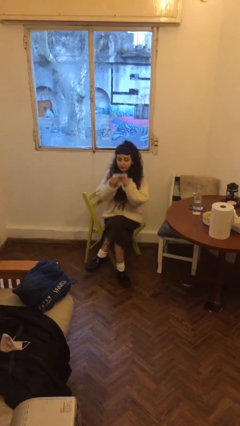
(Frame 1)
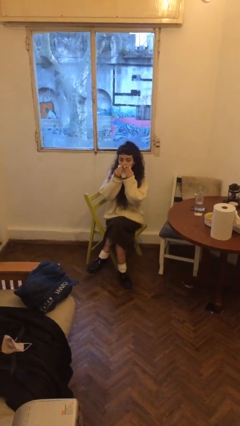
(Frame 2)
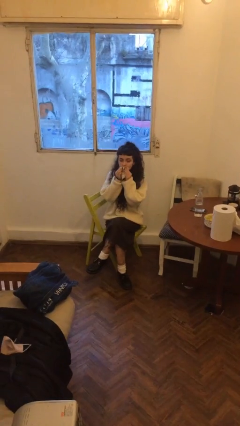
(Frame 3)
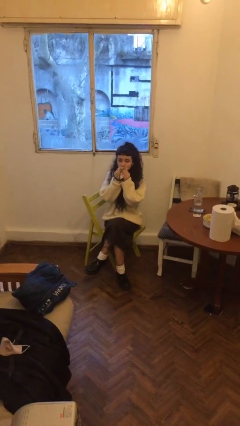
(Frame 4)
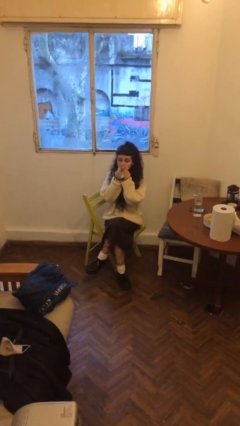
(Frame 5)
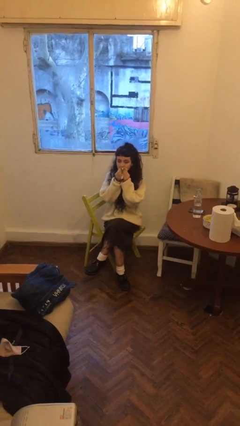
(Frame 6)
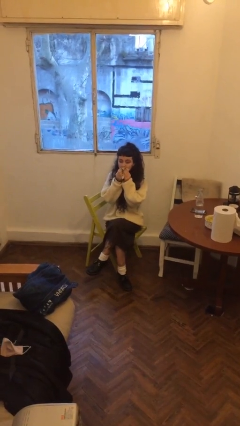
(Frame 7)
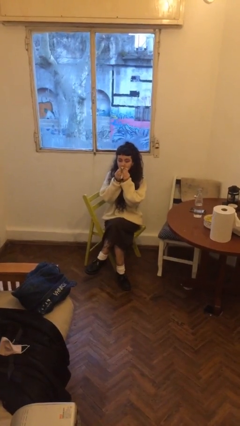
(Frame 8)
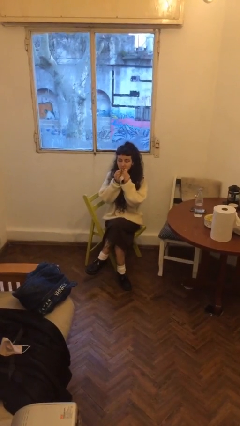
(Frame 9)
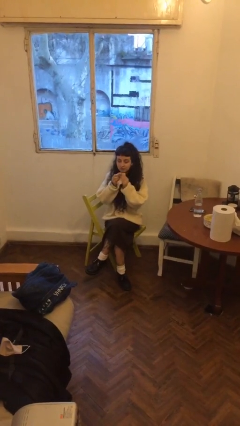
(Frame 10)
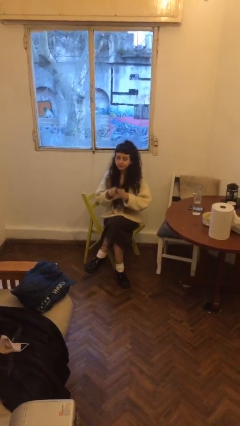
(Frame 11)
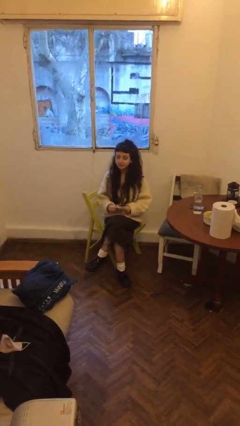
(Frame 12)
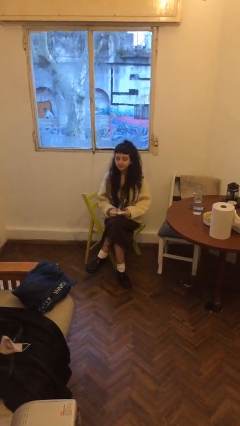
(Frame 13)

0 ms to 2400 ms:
person wipes mouth with napkin

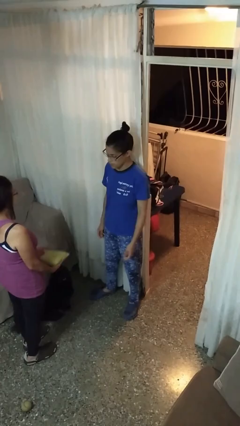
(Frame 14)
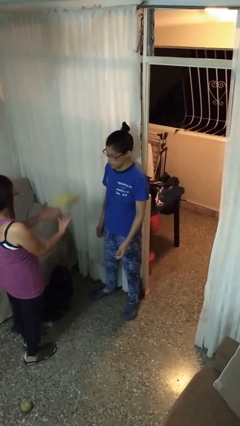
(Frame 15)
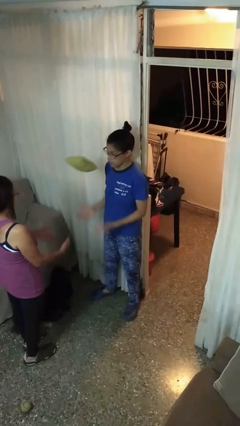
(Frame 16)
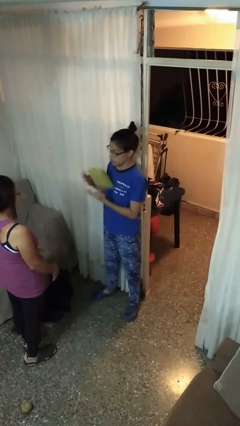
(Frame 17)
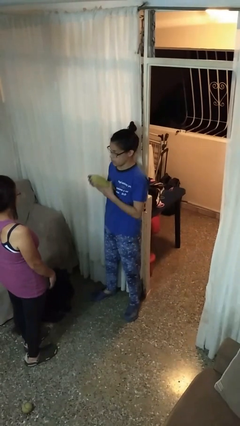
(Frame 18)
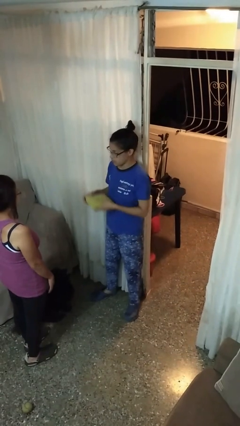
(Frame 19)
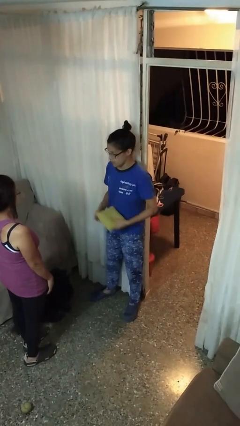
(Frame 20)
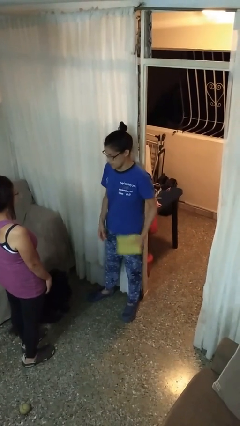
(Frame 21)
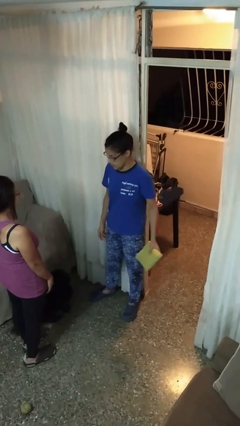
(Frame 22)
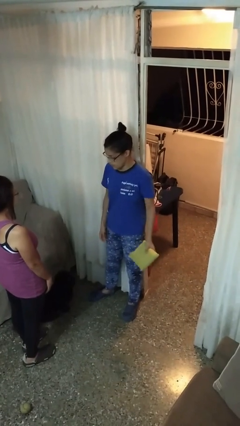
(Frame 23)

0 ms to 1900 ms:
person catches object from person

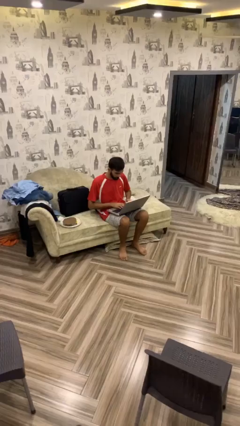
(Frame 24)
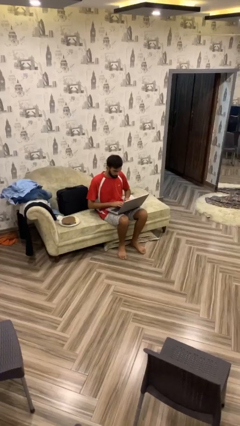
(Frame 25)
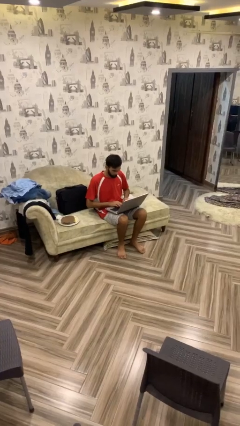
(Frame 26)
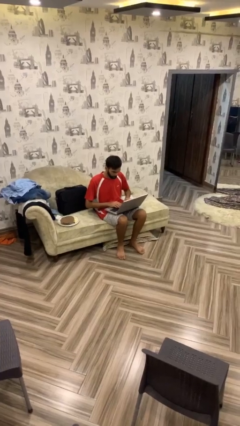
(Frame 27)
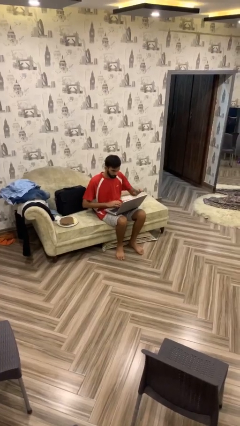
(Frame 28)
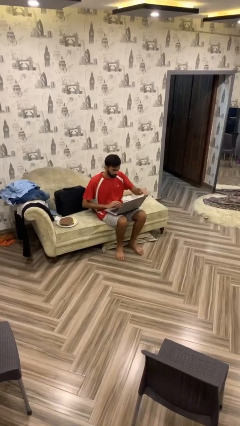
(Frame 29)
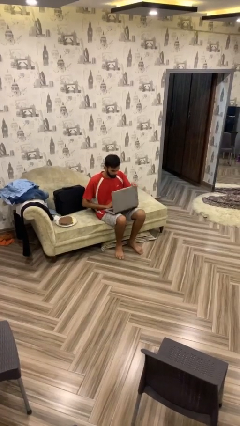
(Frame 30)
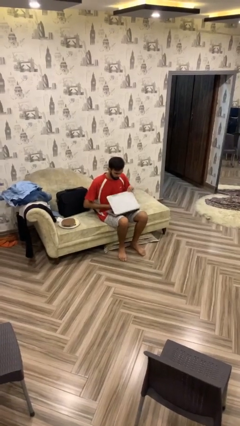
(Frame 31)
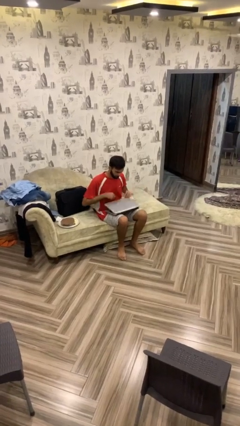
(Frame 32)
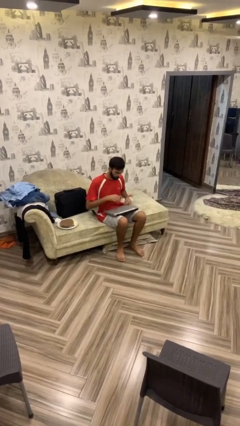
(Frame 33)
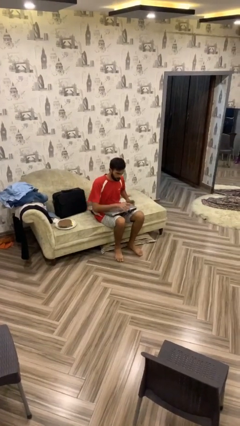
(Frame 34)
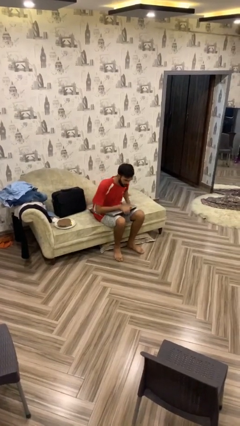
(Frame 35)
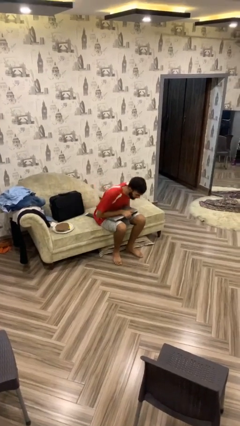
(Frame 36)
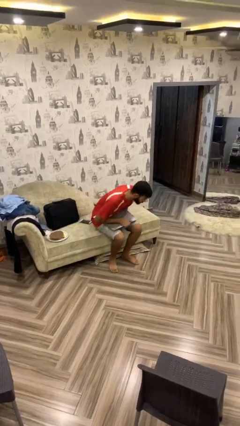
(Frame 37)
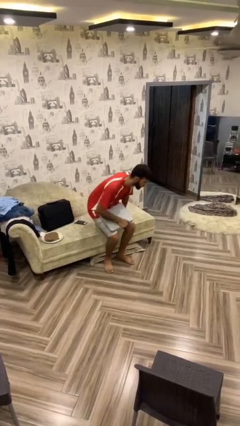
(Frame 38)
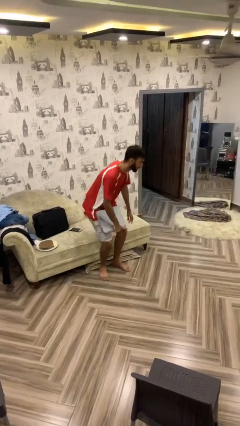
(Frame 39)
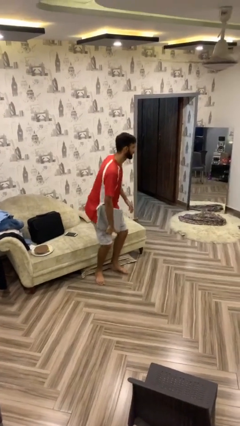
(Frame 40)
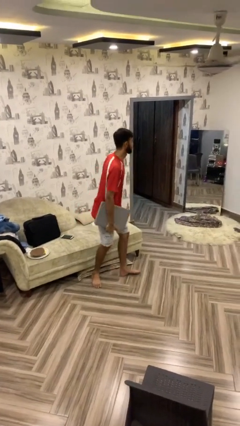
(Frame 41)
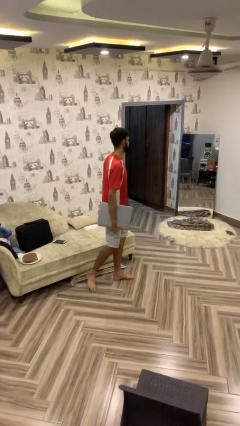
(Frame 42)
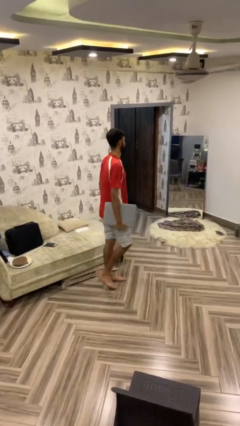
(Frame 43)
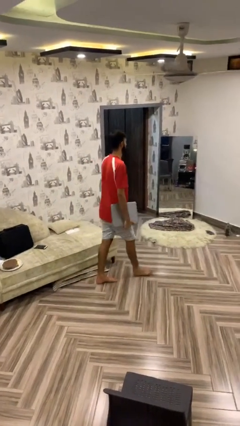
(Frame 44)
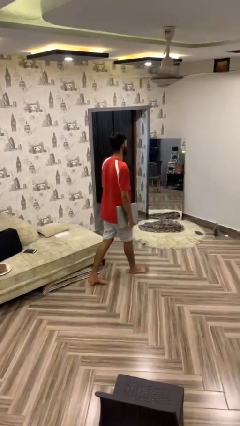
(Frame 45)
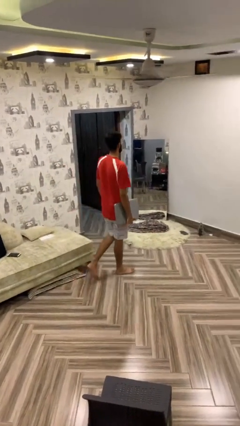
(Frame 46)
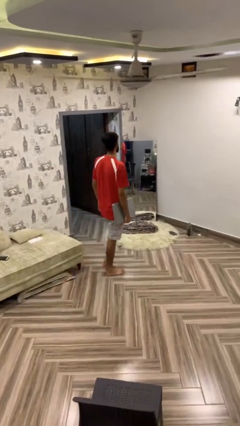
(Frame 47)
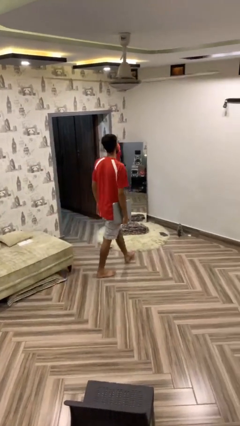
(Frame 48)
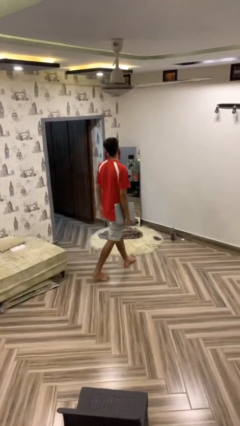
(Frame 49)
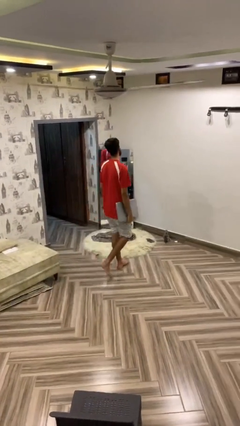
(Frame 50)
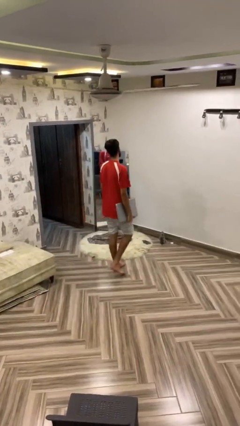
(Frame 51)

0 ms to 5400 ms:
person stands up

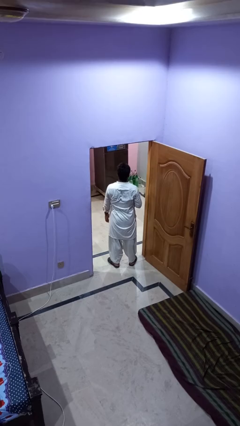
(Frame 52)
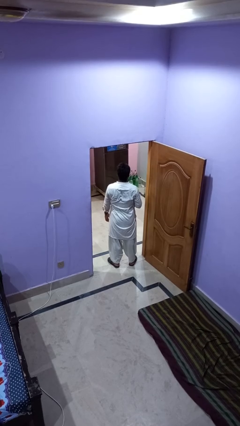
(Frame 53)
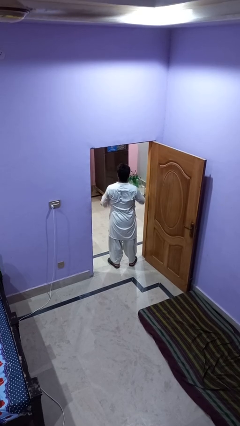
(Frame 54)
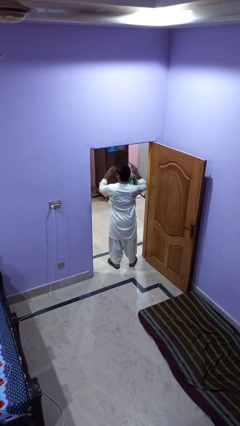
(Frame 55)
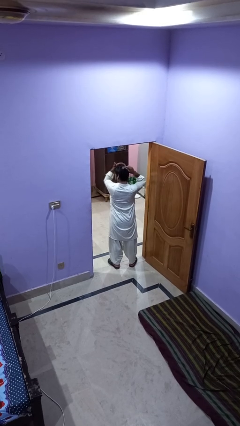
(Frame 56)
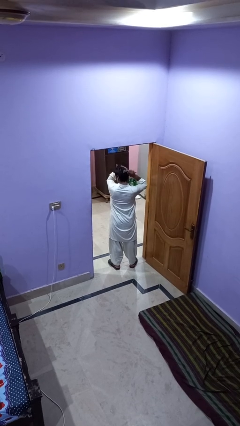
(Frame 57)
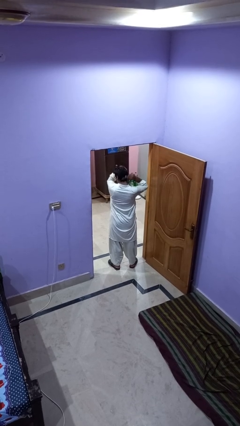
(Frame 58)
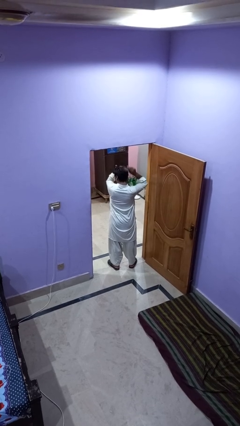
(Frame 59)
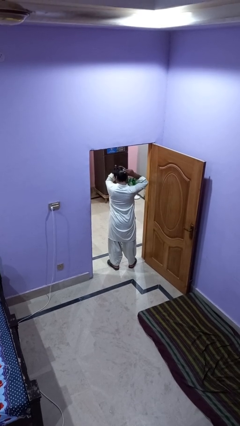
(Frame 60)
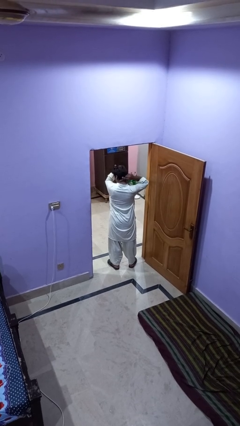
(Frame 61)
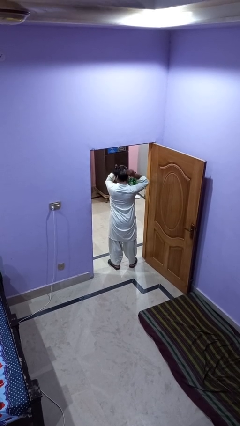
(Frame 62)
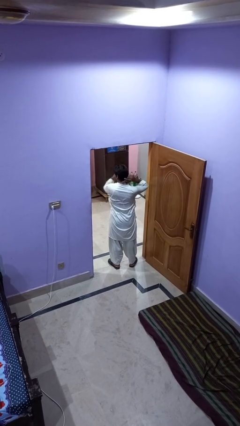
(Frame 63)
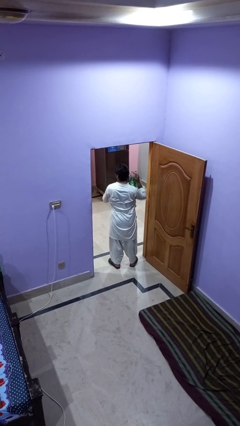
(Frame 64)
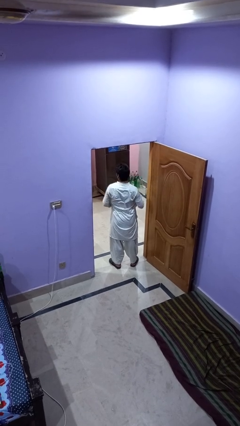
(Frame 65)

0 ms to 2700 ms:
person brushes hair

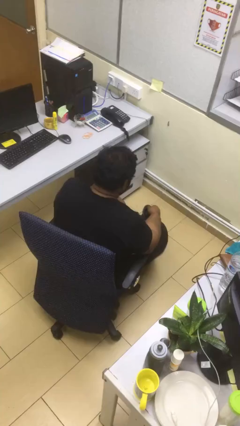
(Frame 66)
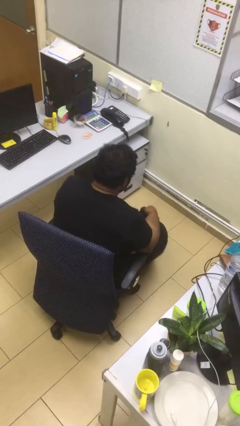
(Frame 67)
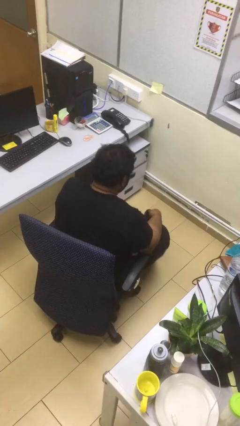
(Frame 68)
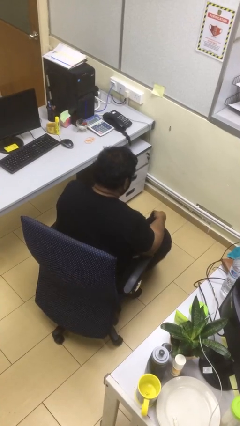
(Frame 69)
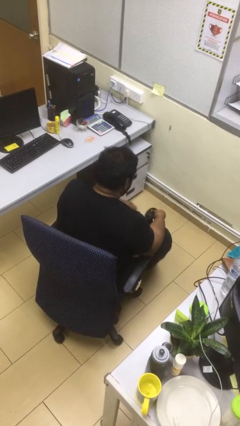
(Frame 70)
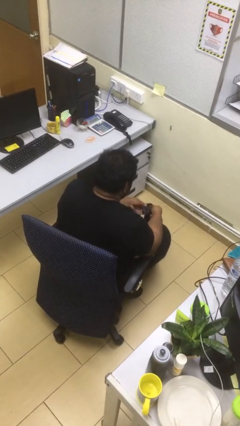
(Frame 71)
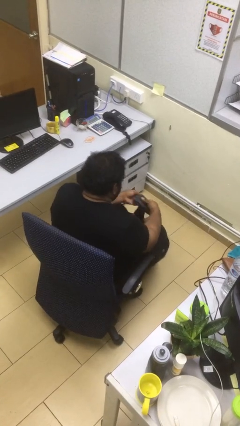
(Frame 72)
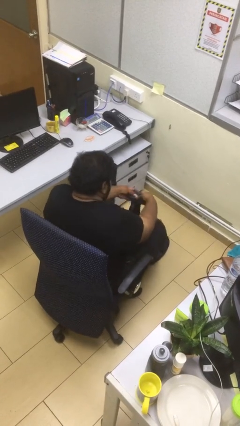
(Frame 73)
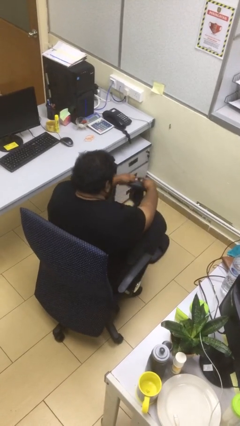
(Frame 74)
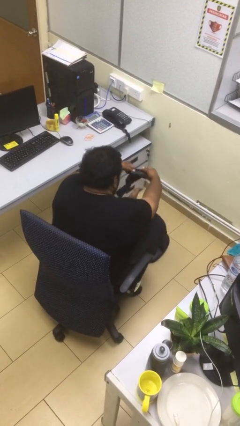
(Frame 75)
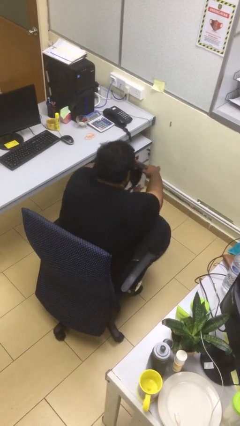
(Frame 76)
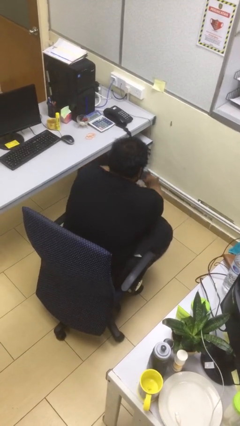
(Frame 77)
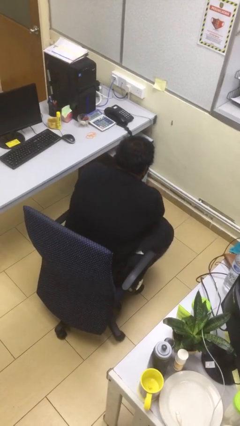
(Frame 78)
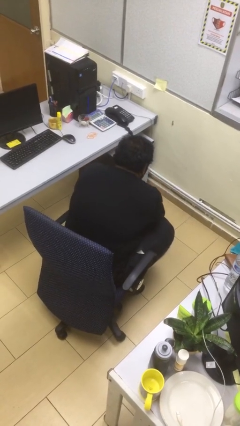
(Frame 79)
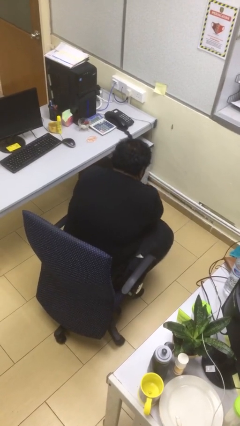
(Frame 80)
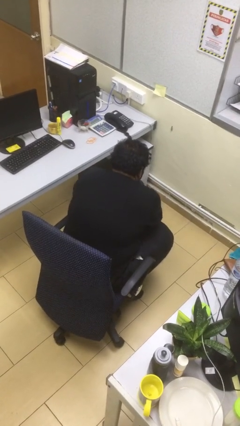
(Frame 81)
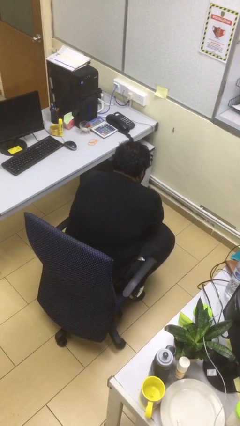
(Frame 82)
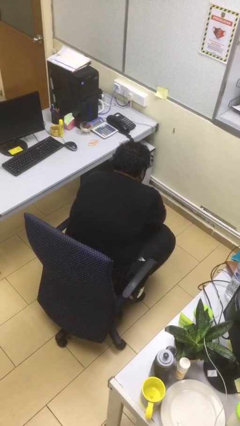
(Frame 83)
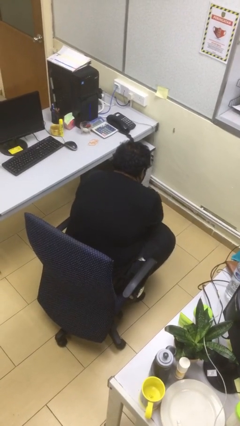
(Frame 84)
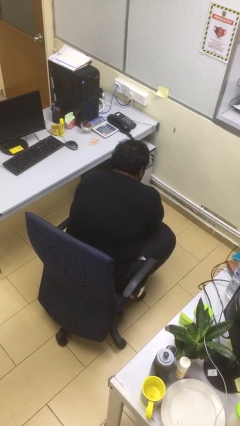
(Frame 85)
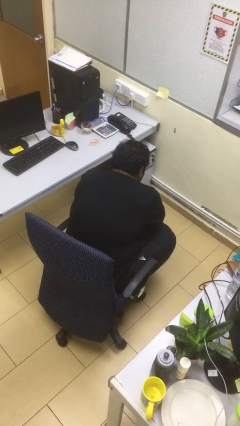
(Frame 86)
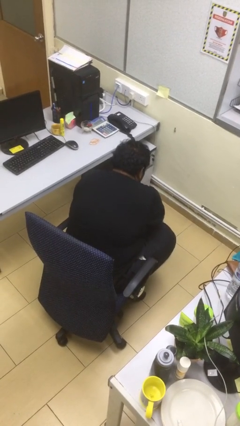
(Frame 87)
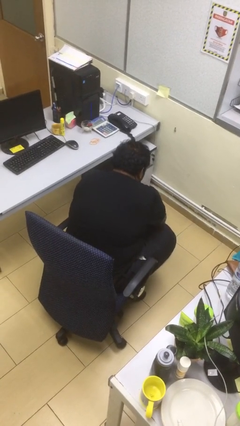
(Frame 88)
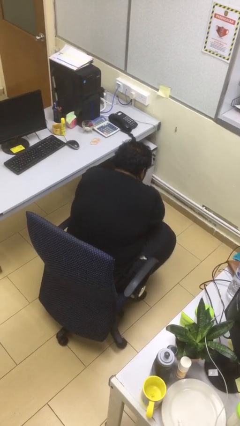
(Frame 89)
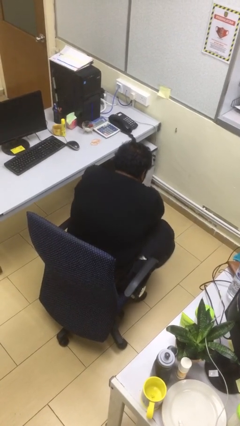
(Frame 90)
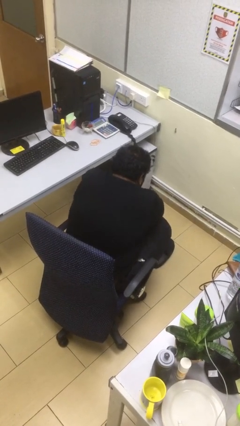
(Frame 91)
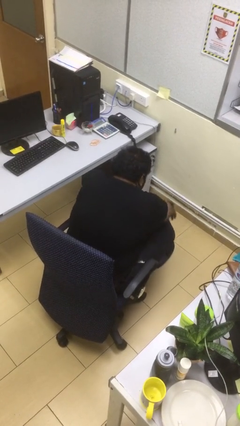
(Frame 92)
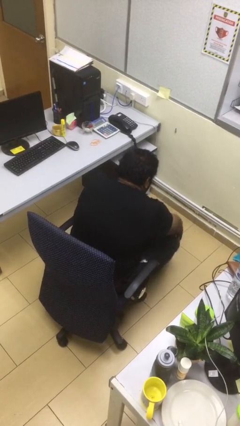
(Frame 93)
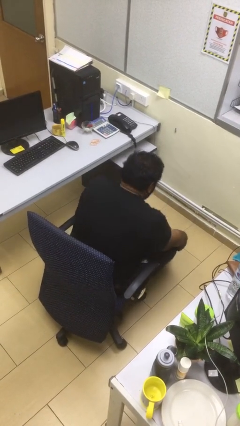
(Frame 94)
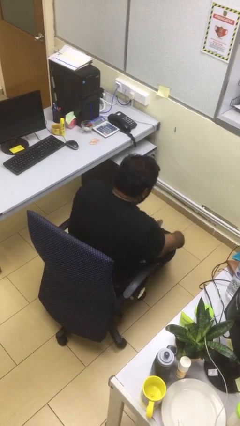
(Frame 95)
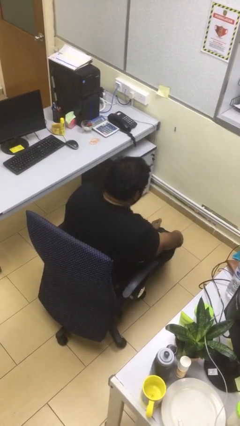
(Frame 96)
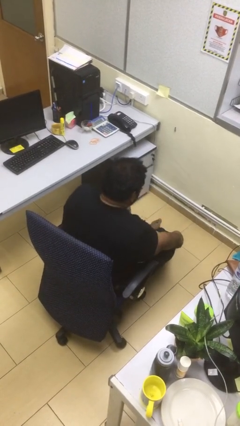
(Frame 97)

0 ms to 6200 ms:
person puts on socks
